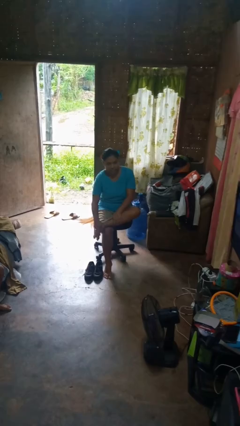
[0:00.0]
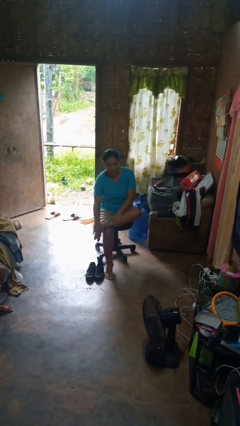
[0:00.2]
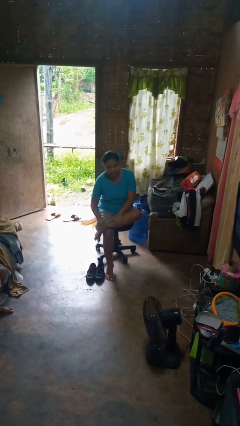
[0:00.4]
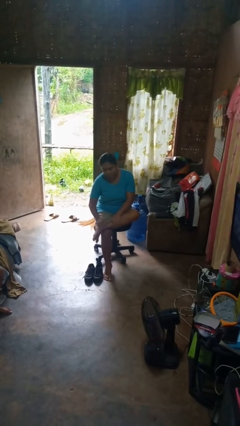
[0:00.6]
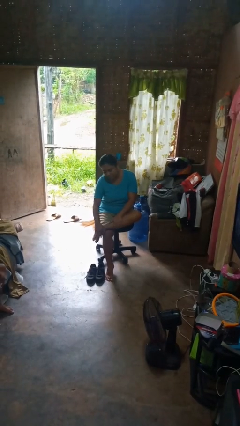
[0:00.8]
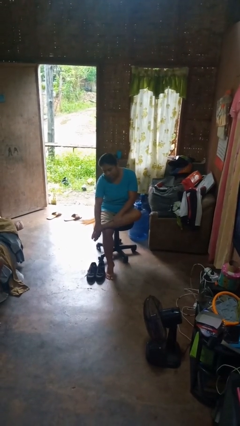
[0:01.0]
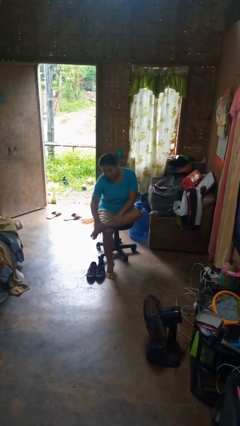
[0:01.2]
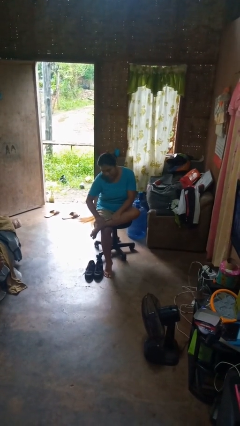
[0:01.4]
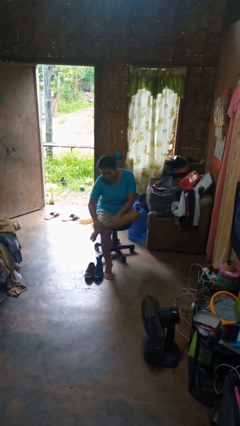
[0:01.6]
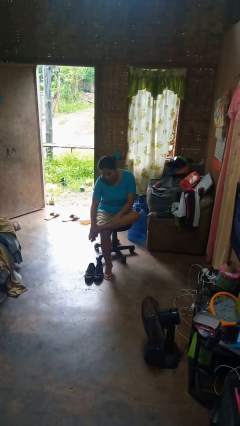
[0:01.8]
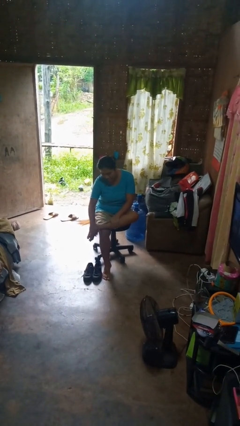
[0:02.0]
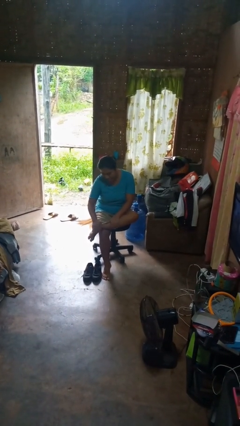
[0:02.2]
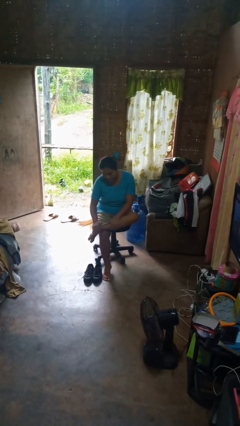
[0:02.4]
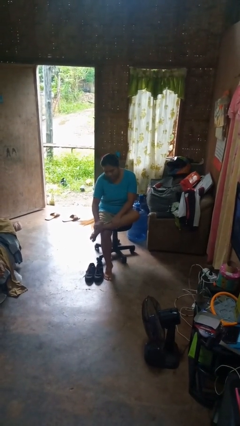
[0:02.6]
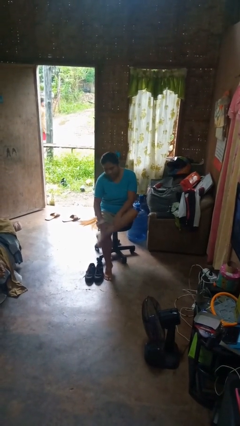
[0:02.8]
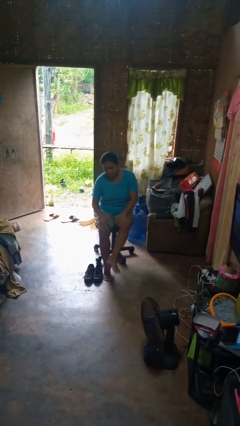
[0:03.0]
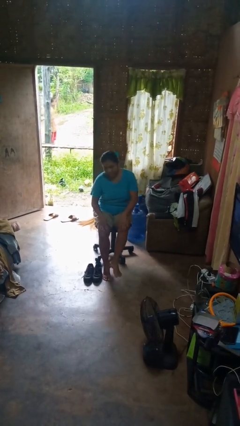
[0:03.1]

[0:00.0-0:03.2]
person rubs foot

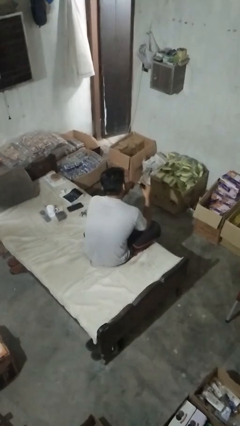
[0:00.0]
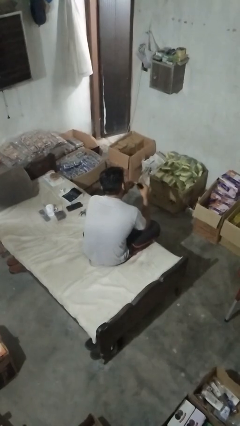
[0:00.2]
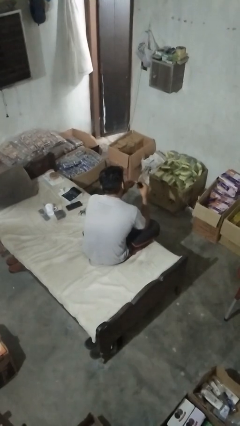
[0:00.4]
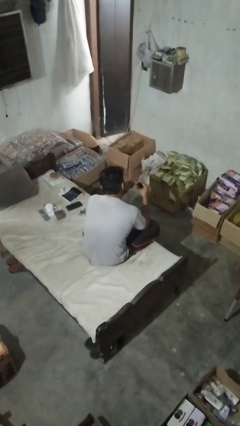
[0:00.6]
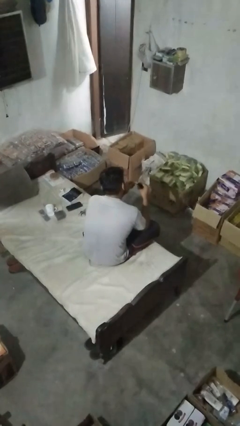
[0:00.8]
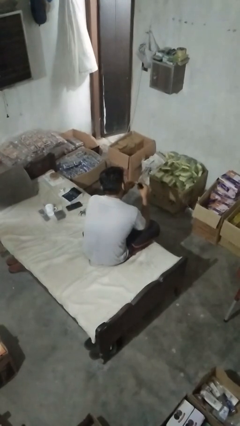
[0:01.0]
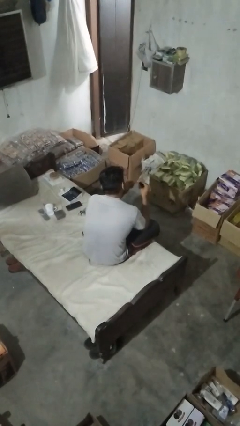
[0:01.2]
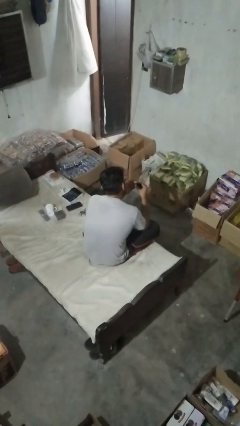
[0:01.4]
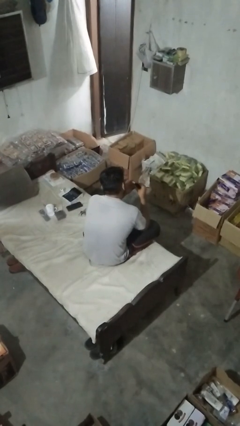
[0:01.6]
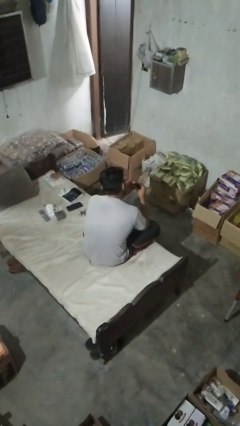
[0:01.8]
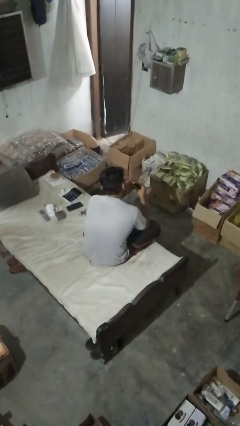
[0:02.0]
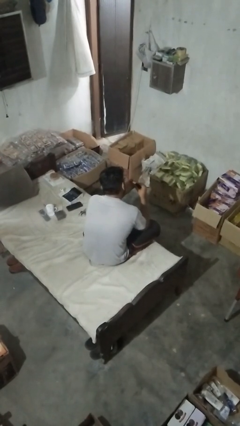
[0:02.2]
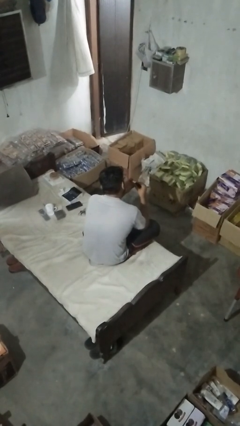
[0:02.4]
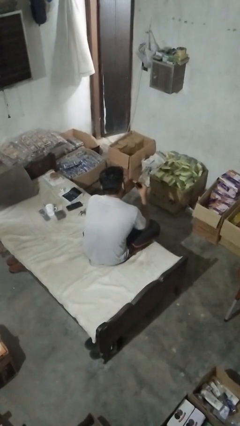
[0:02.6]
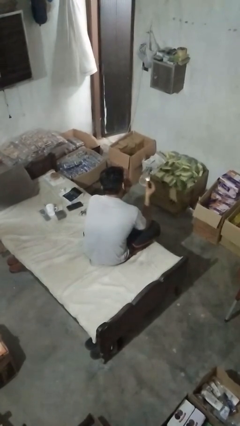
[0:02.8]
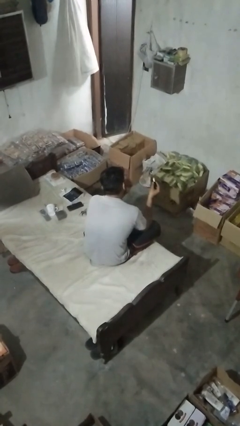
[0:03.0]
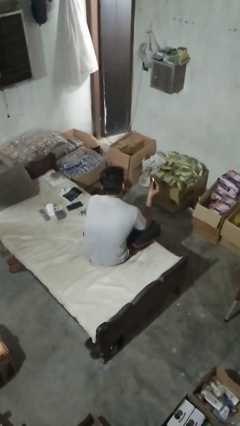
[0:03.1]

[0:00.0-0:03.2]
person paints fingernails

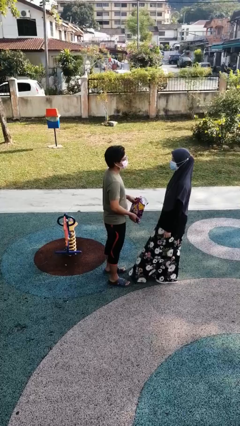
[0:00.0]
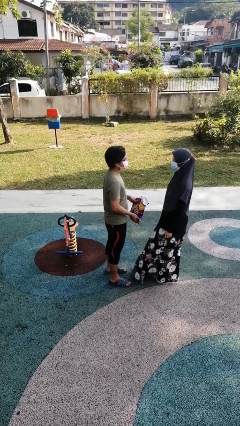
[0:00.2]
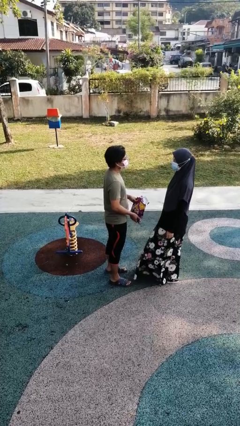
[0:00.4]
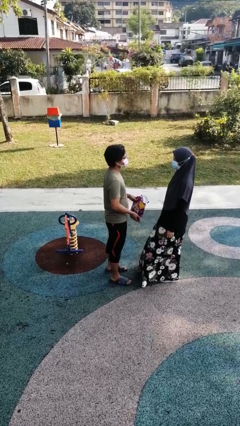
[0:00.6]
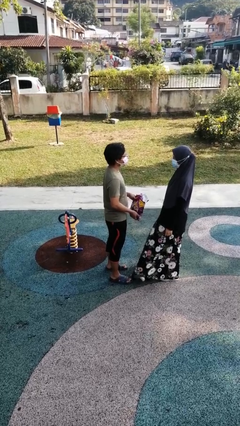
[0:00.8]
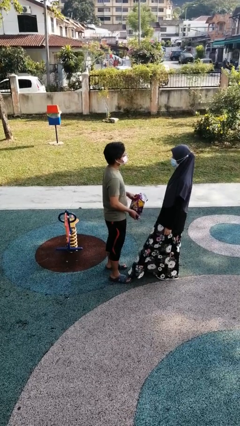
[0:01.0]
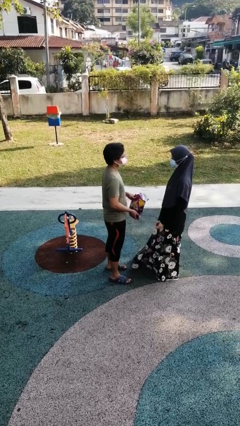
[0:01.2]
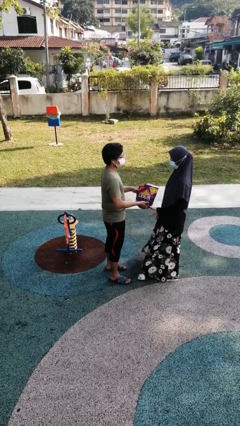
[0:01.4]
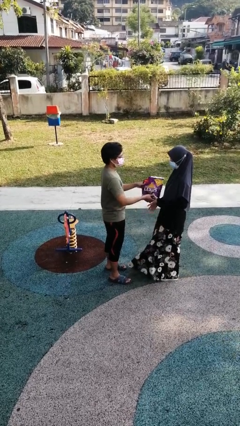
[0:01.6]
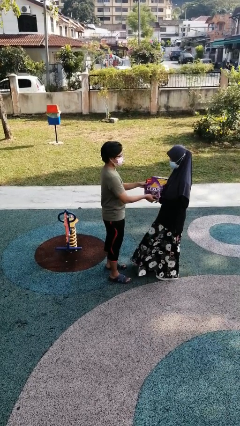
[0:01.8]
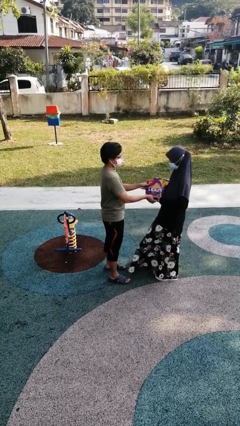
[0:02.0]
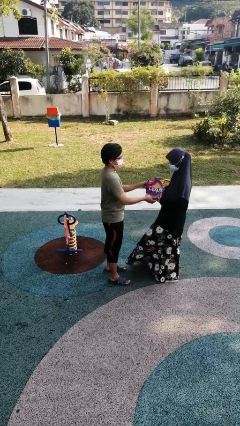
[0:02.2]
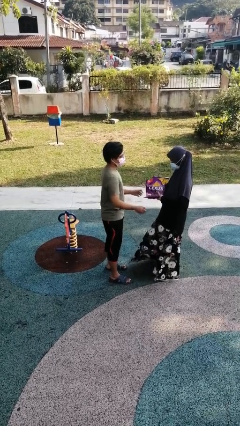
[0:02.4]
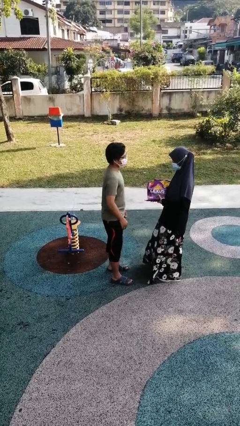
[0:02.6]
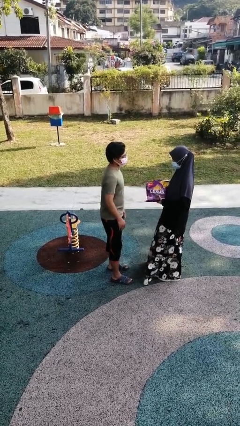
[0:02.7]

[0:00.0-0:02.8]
person transfers object to person

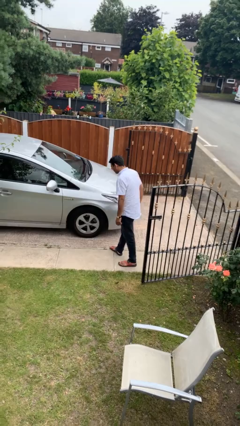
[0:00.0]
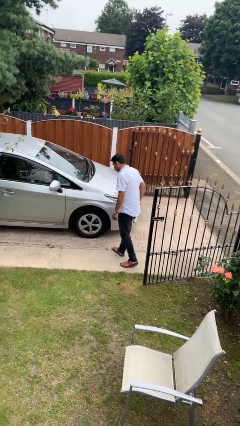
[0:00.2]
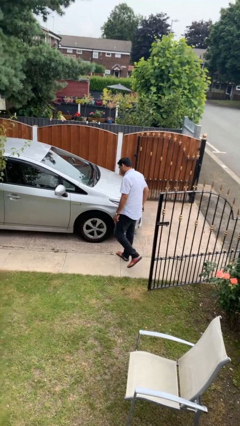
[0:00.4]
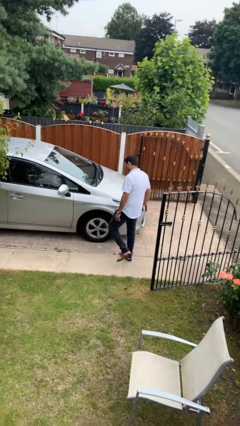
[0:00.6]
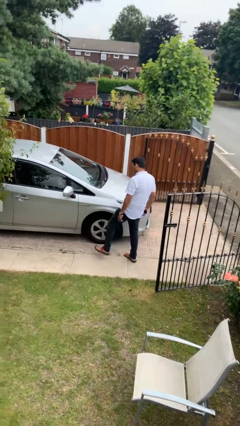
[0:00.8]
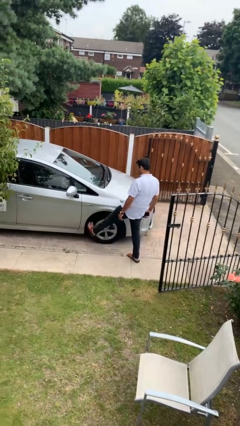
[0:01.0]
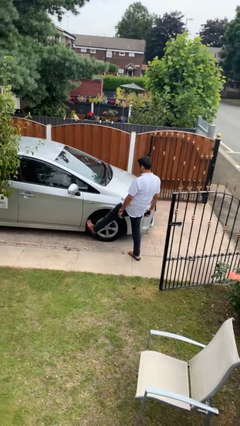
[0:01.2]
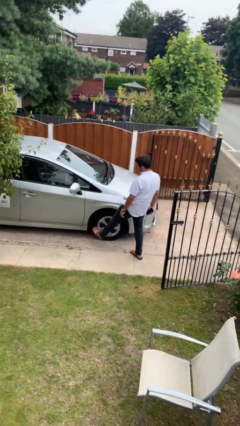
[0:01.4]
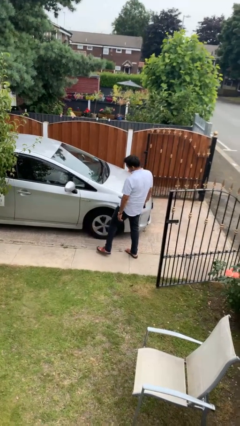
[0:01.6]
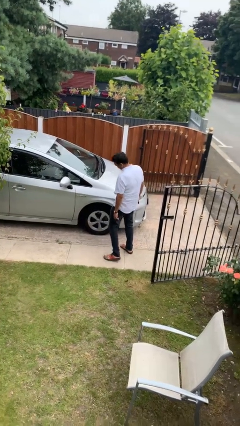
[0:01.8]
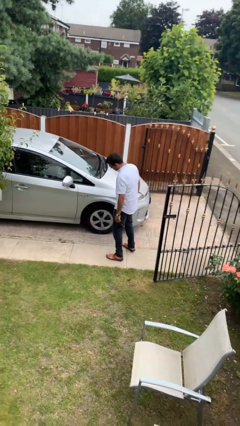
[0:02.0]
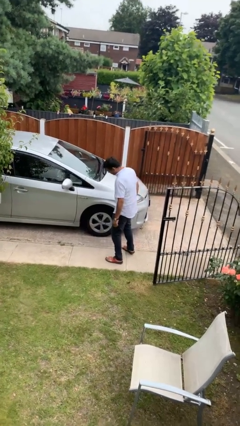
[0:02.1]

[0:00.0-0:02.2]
person kicks car tires

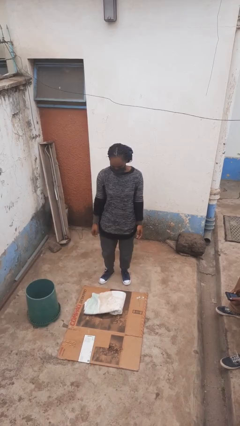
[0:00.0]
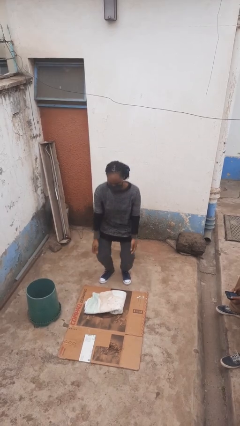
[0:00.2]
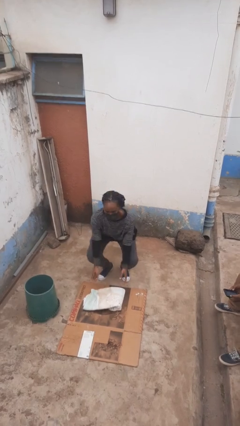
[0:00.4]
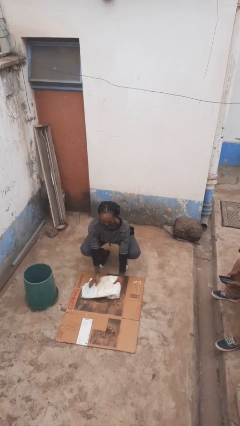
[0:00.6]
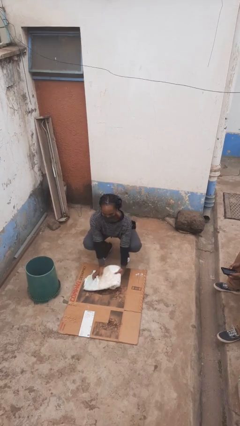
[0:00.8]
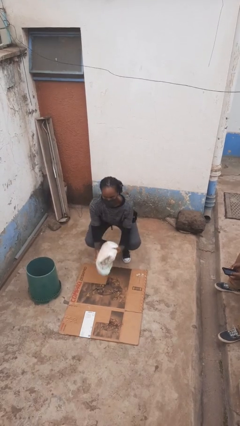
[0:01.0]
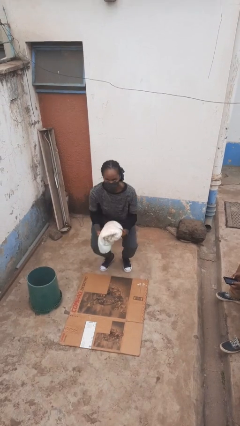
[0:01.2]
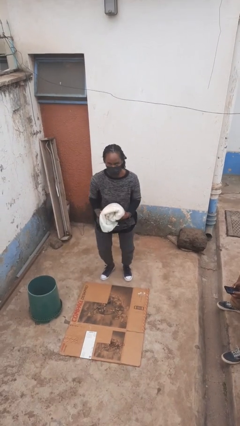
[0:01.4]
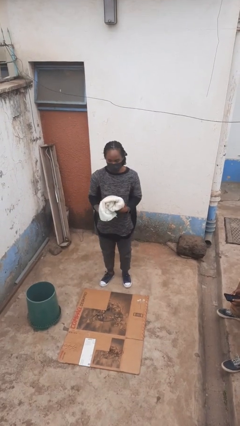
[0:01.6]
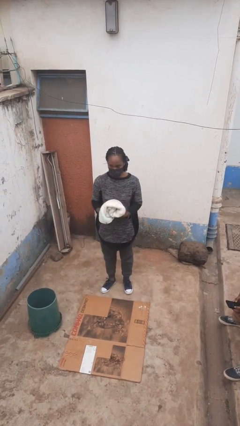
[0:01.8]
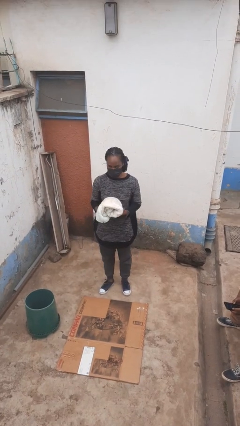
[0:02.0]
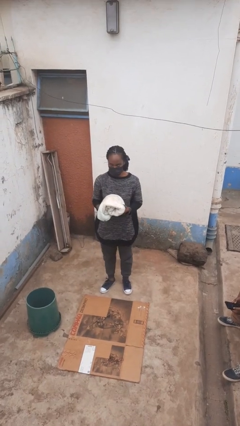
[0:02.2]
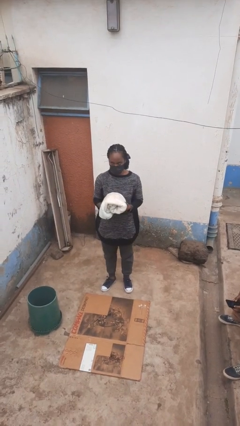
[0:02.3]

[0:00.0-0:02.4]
person picks up object from floor

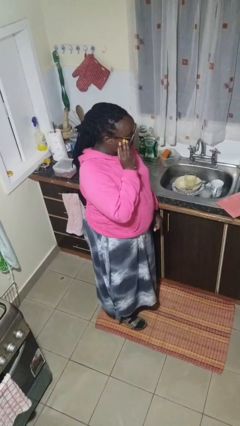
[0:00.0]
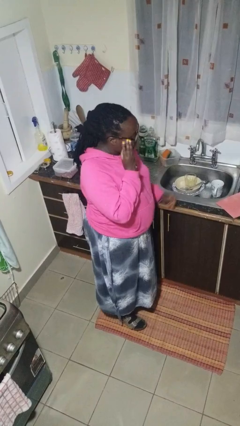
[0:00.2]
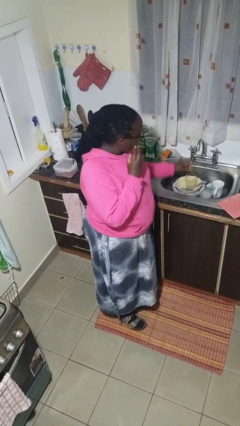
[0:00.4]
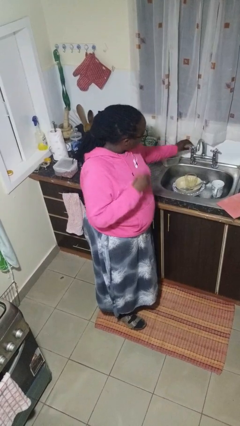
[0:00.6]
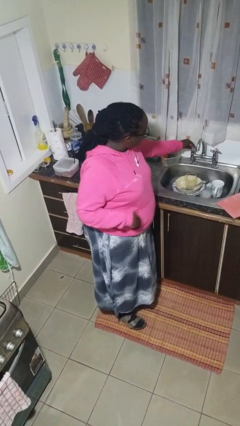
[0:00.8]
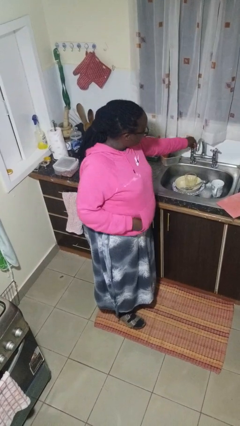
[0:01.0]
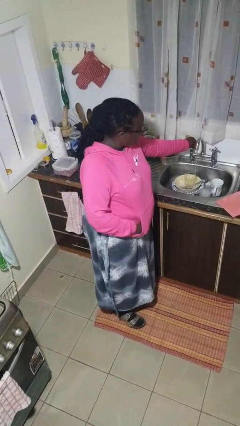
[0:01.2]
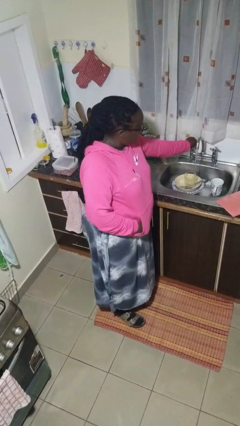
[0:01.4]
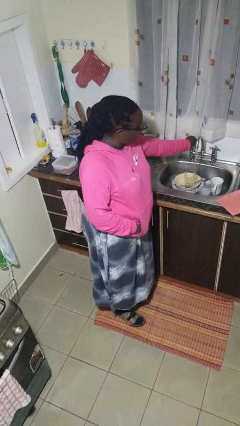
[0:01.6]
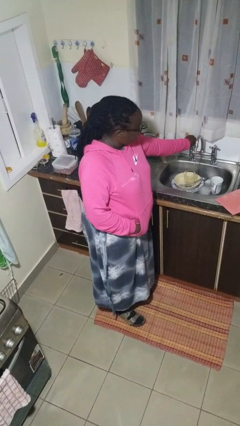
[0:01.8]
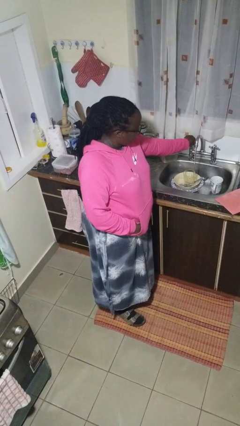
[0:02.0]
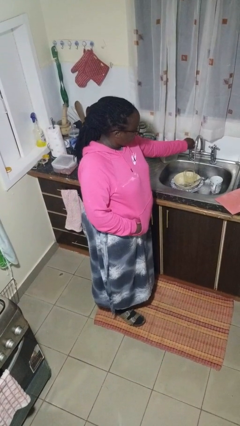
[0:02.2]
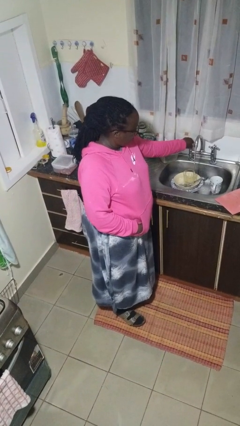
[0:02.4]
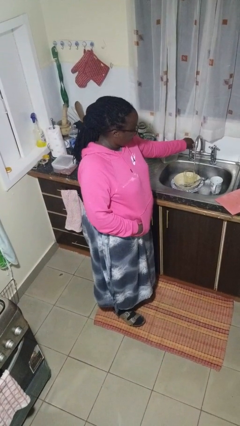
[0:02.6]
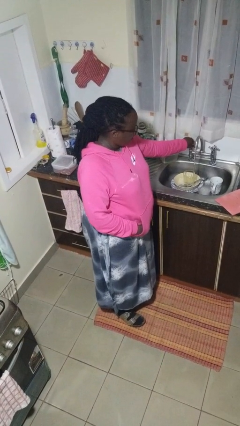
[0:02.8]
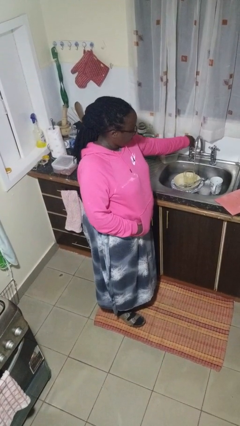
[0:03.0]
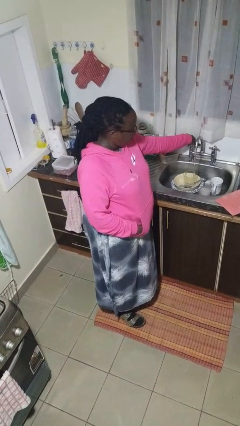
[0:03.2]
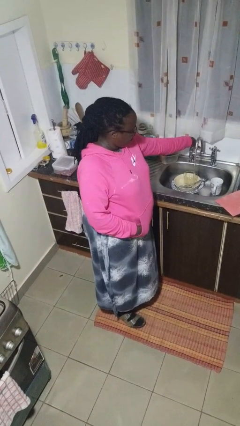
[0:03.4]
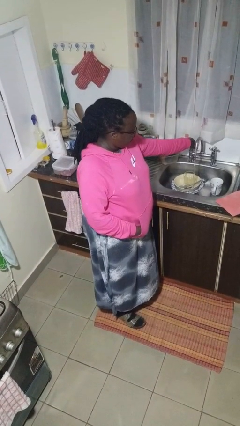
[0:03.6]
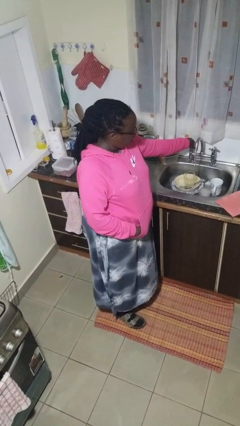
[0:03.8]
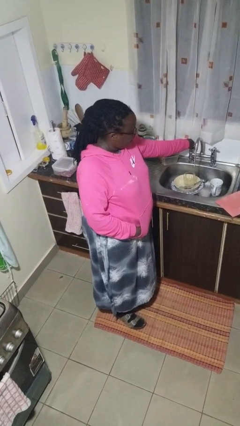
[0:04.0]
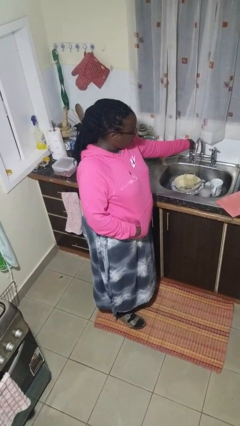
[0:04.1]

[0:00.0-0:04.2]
person turns on faucet
